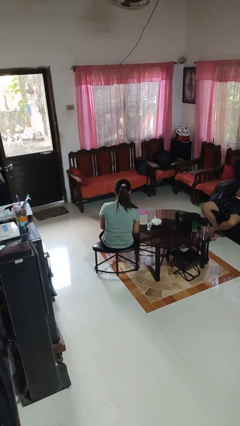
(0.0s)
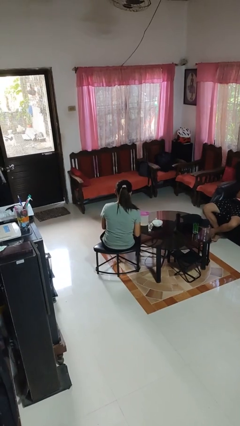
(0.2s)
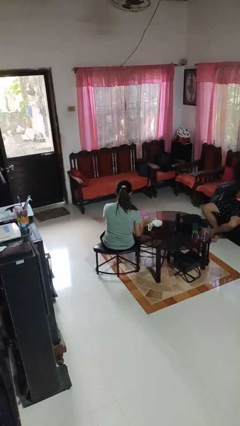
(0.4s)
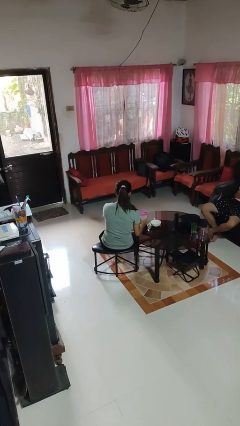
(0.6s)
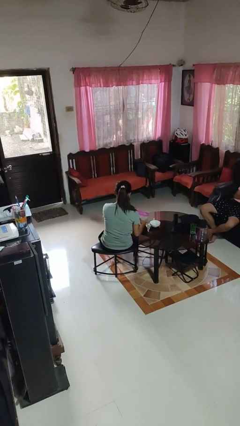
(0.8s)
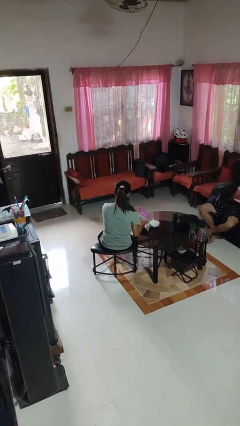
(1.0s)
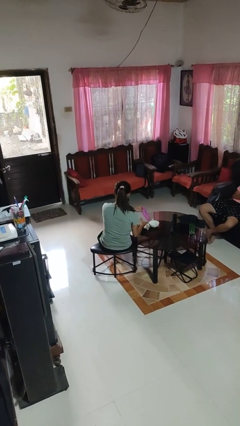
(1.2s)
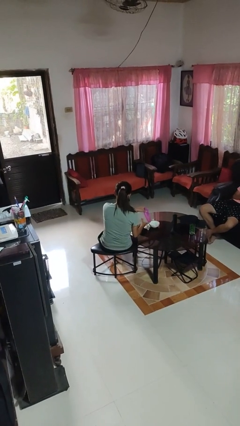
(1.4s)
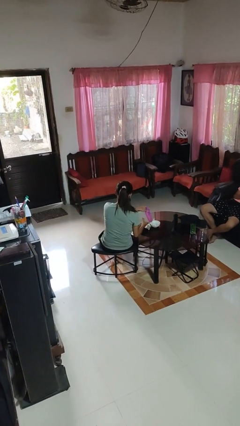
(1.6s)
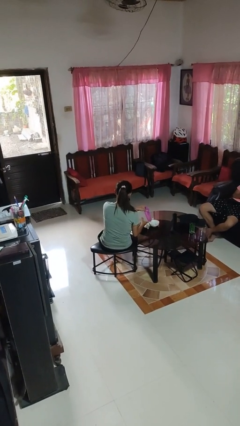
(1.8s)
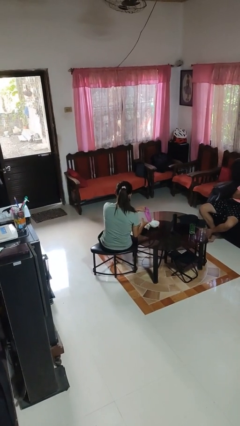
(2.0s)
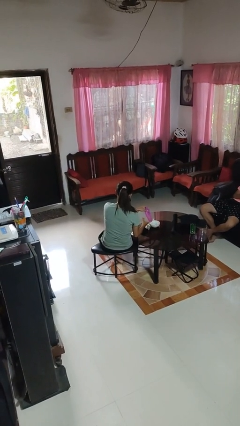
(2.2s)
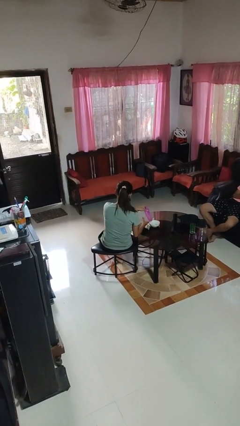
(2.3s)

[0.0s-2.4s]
person pours into bowl

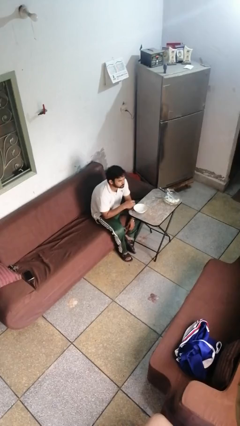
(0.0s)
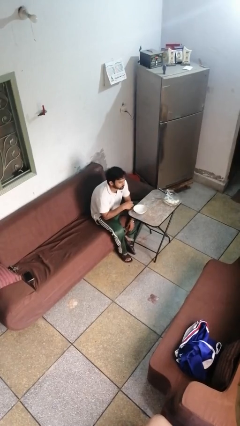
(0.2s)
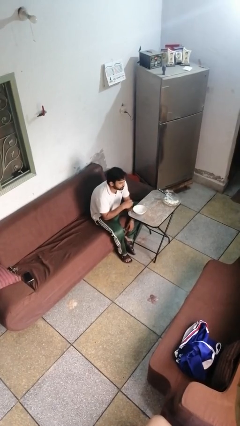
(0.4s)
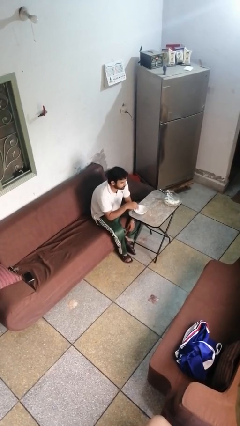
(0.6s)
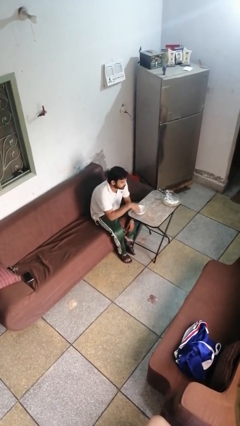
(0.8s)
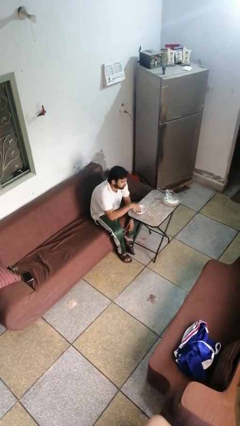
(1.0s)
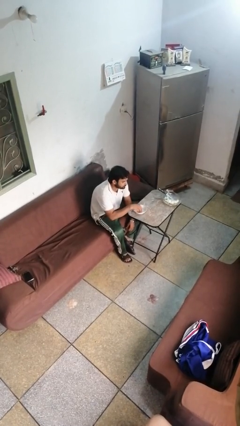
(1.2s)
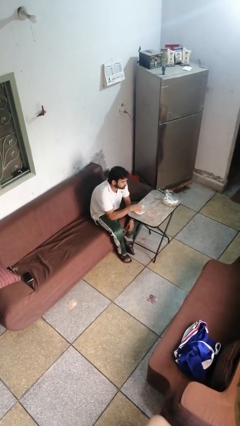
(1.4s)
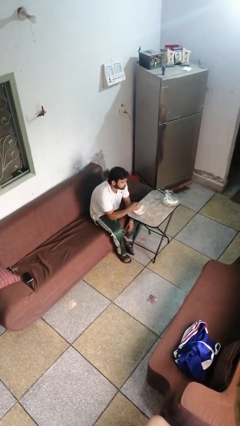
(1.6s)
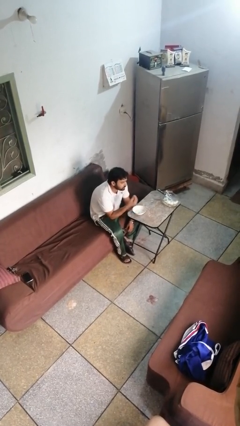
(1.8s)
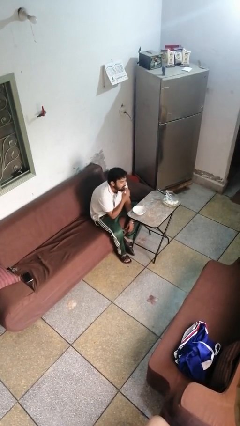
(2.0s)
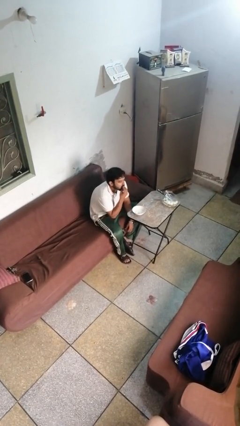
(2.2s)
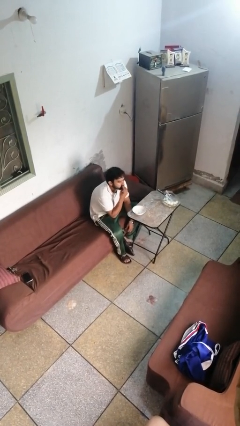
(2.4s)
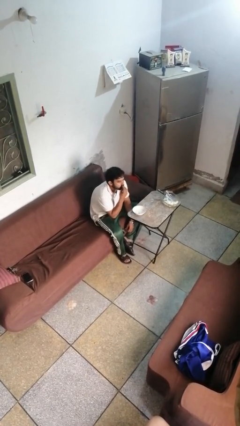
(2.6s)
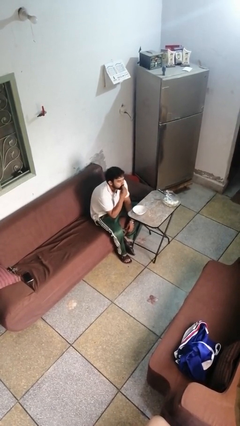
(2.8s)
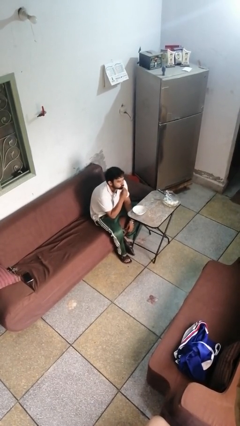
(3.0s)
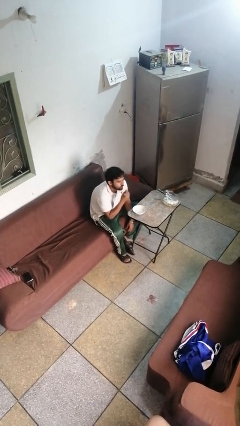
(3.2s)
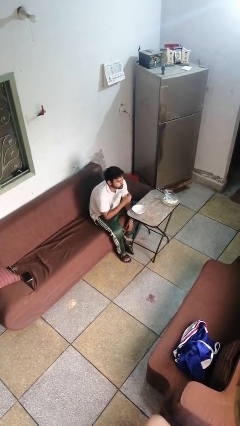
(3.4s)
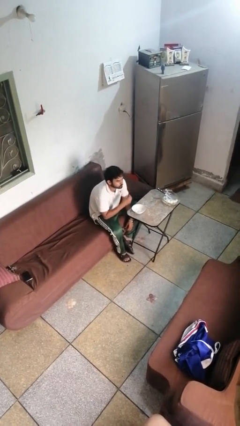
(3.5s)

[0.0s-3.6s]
person eats with hands

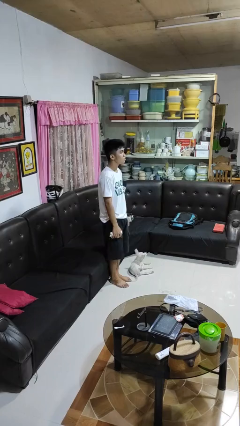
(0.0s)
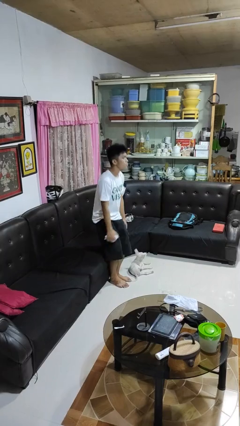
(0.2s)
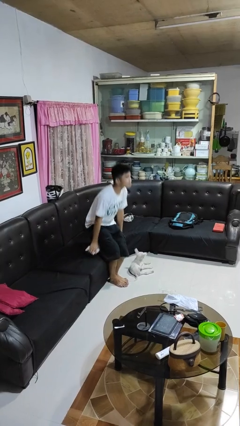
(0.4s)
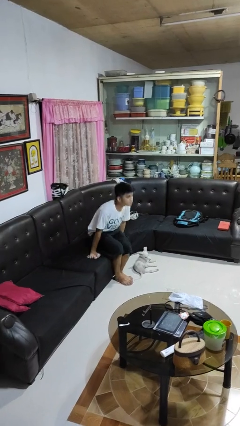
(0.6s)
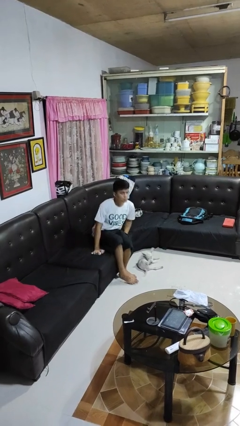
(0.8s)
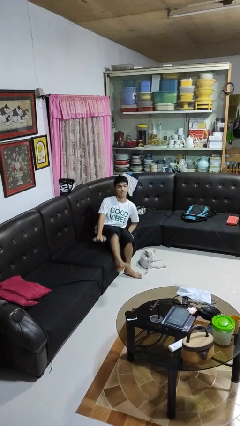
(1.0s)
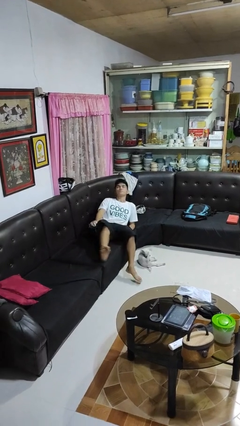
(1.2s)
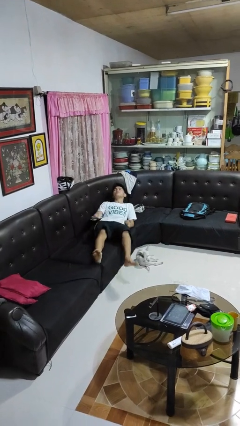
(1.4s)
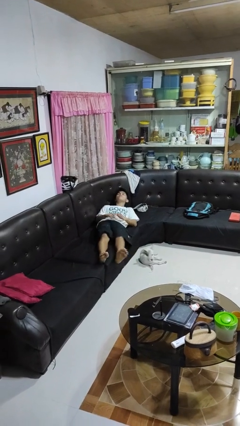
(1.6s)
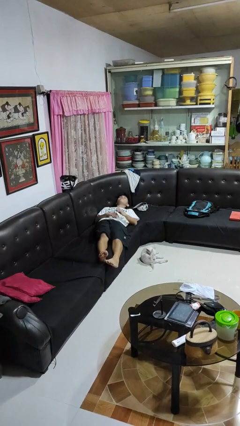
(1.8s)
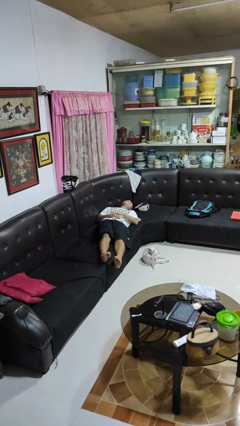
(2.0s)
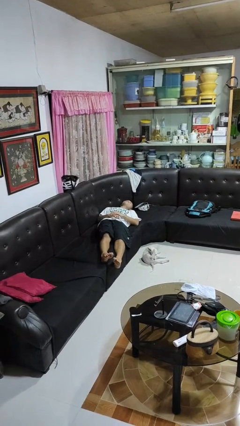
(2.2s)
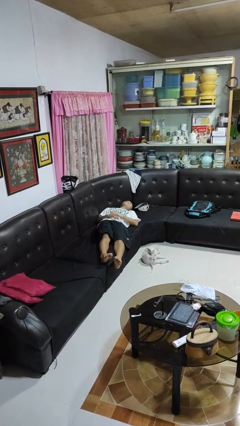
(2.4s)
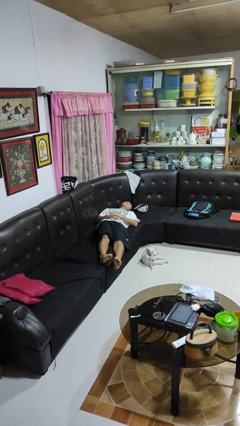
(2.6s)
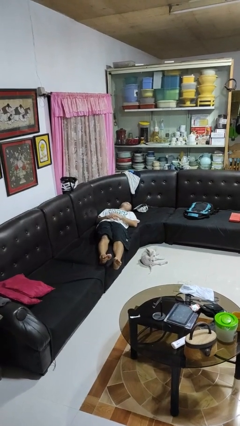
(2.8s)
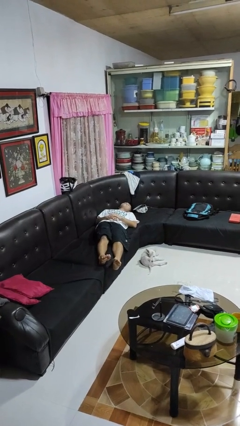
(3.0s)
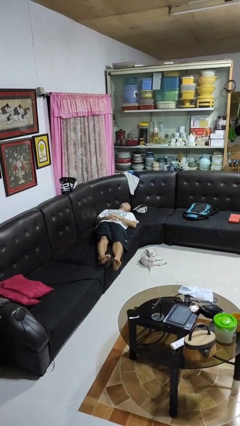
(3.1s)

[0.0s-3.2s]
person lies down on couch

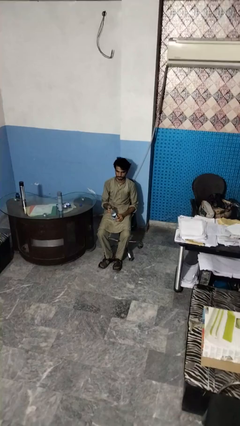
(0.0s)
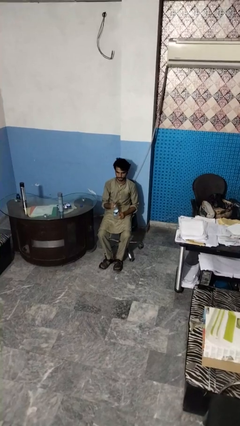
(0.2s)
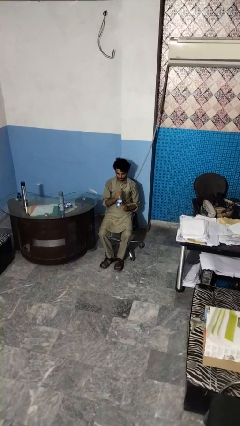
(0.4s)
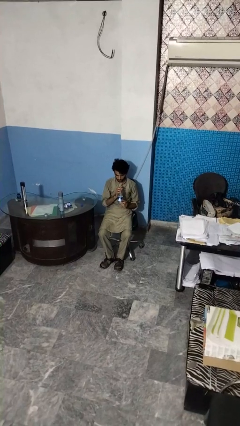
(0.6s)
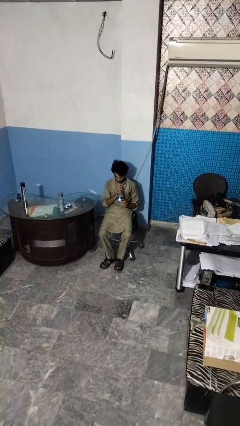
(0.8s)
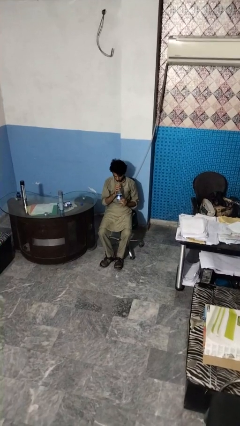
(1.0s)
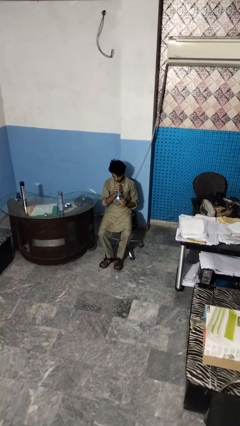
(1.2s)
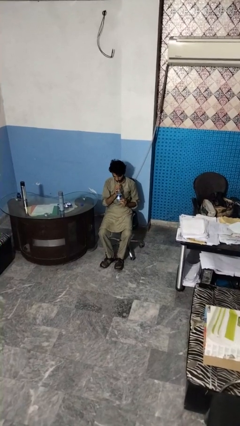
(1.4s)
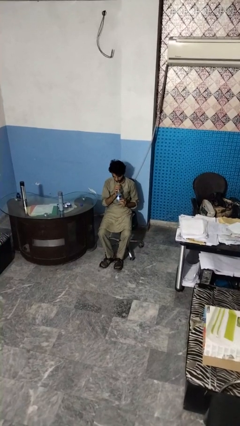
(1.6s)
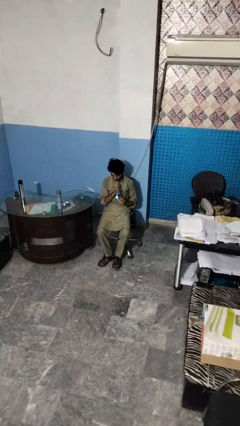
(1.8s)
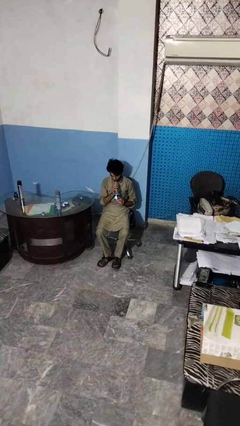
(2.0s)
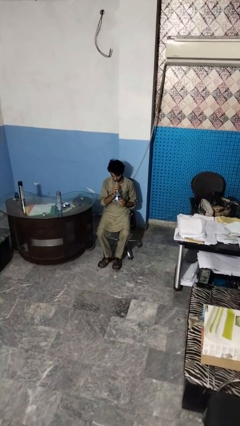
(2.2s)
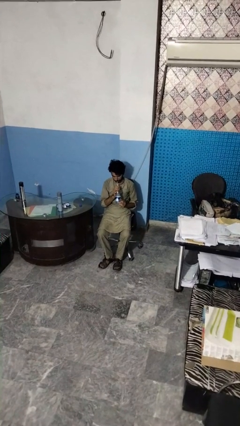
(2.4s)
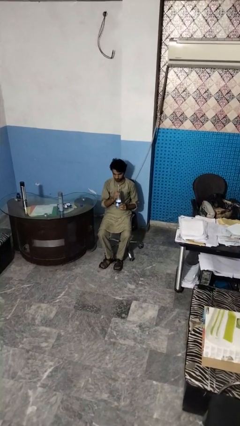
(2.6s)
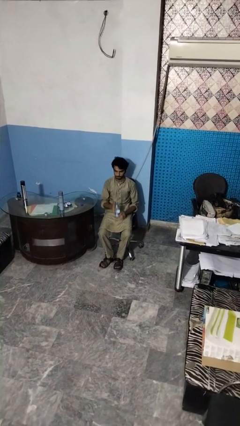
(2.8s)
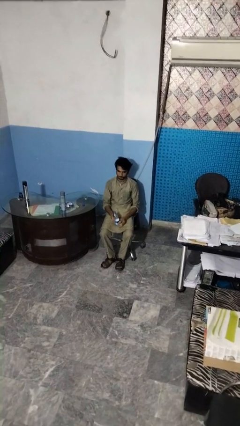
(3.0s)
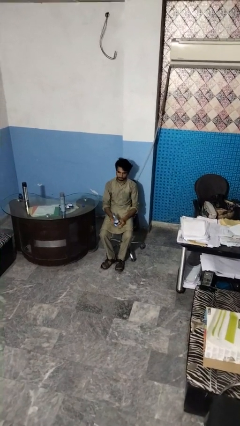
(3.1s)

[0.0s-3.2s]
person drinks from straw

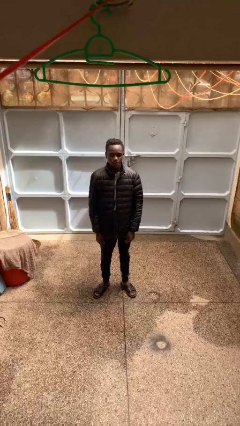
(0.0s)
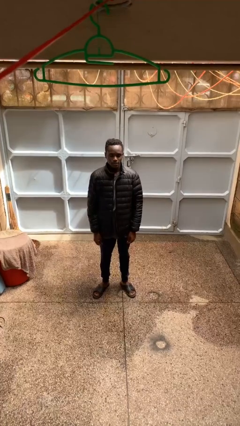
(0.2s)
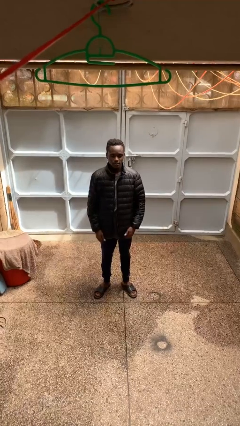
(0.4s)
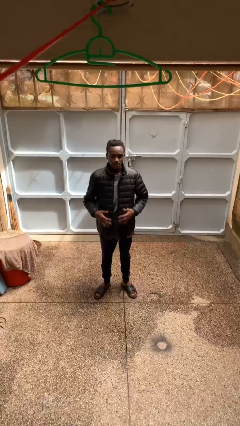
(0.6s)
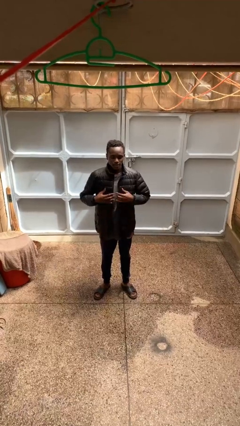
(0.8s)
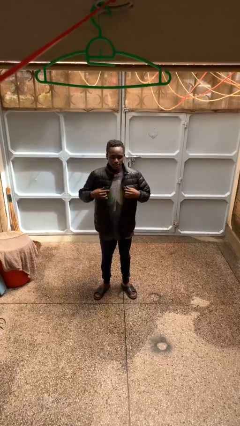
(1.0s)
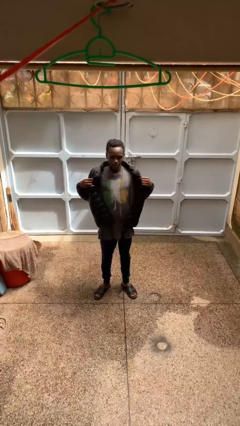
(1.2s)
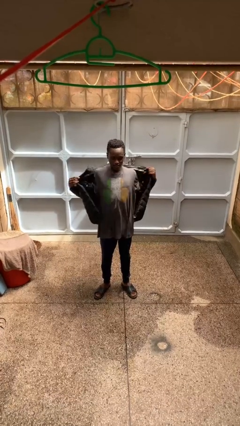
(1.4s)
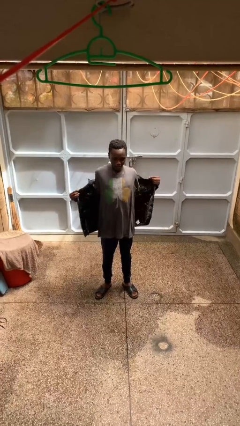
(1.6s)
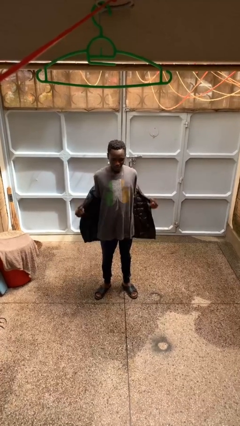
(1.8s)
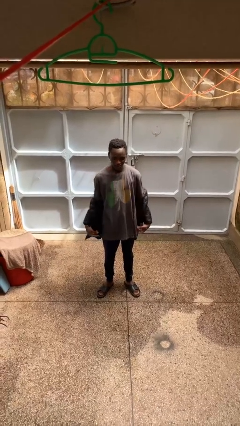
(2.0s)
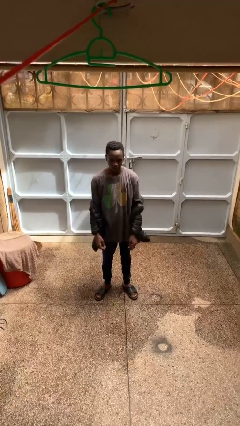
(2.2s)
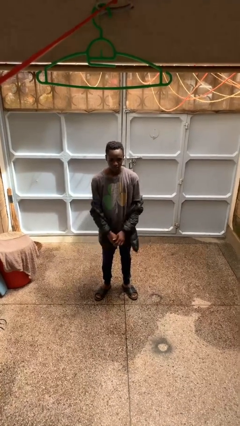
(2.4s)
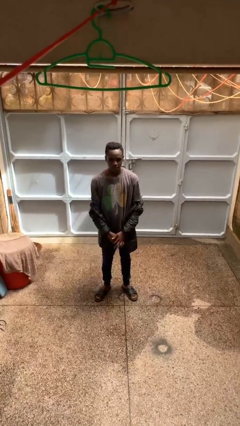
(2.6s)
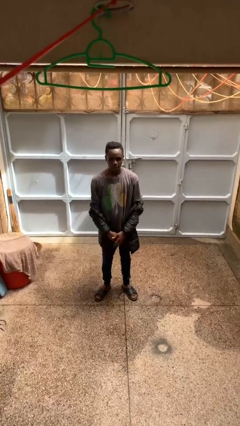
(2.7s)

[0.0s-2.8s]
person takes off jacket

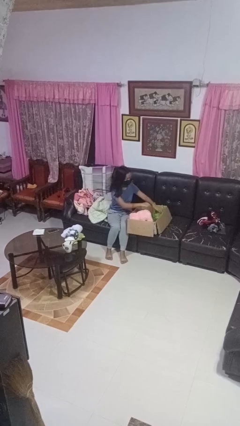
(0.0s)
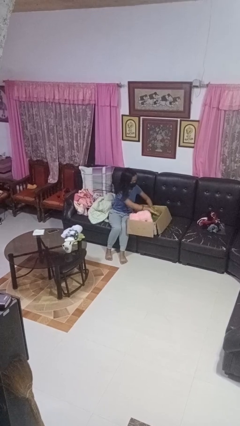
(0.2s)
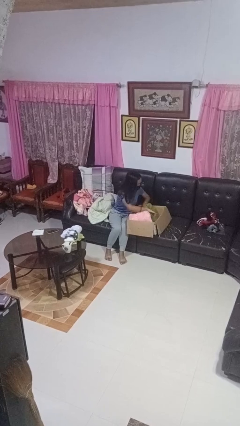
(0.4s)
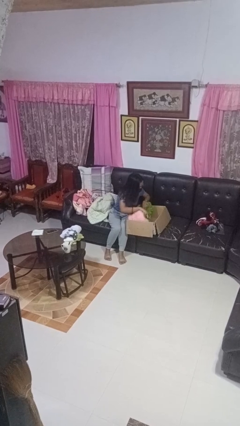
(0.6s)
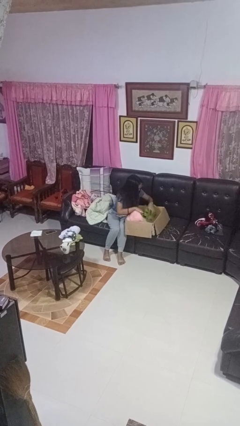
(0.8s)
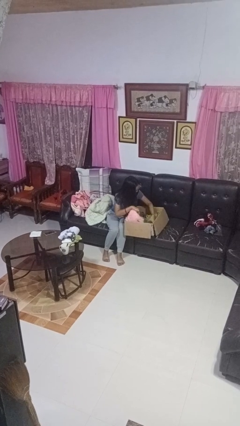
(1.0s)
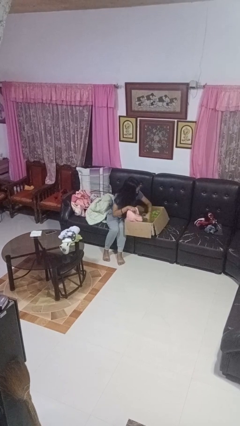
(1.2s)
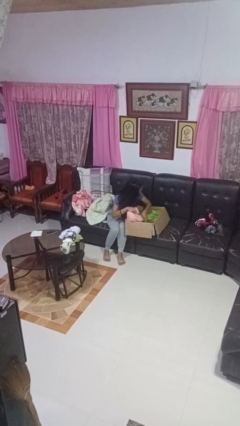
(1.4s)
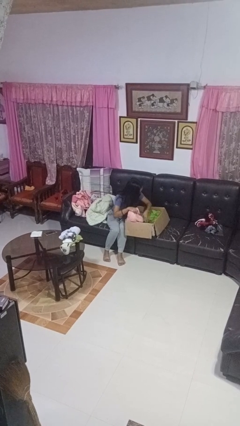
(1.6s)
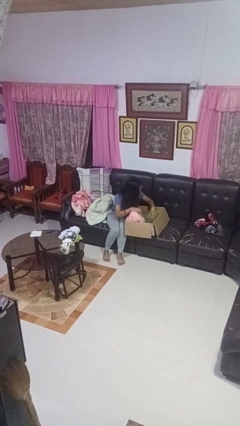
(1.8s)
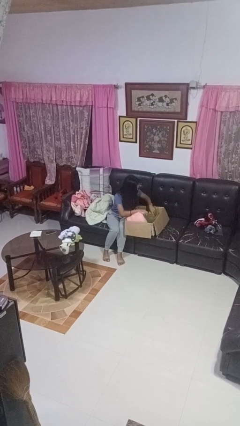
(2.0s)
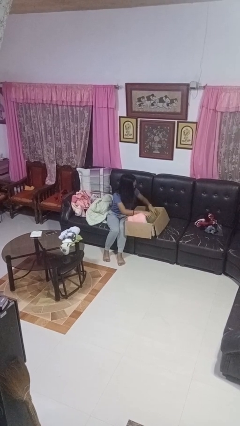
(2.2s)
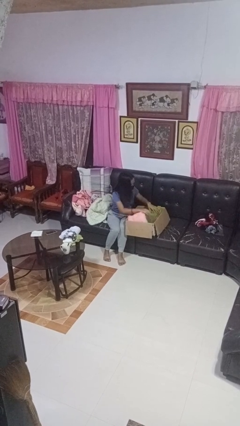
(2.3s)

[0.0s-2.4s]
person searches in box
